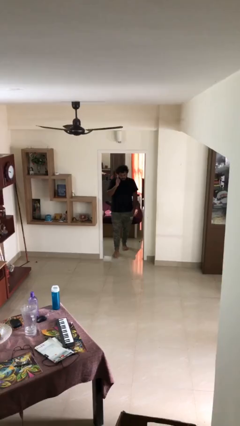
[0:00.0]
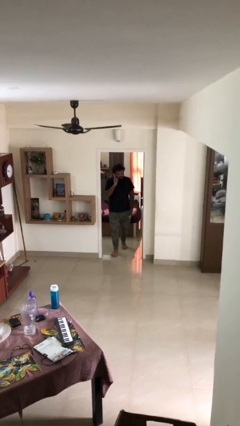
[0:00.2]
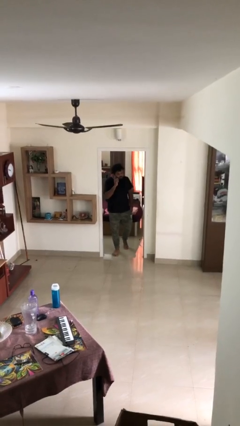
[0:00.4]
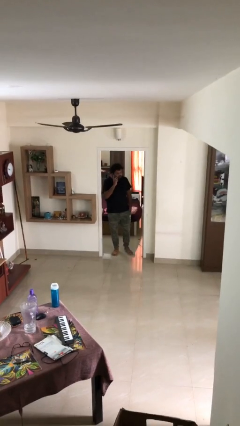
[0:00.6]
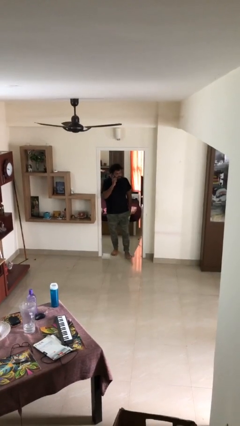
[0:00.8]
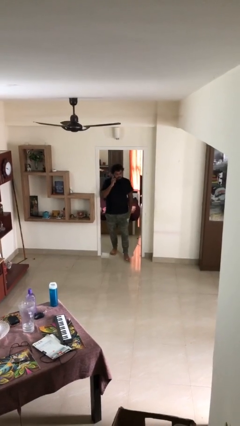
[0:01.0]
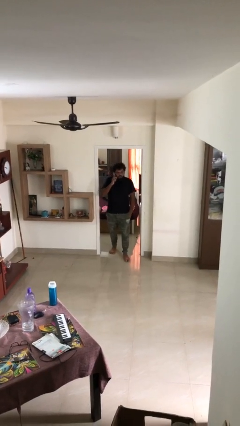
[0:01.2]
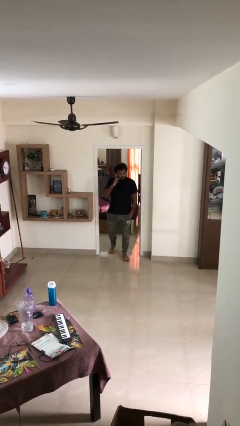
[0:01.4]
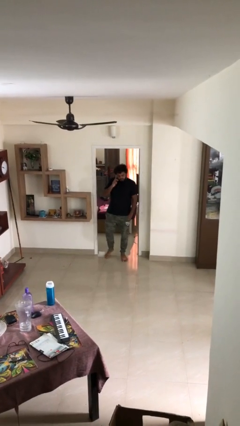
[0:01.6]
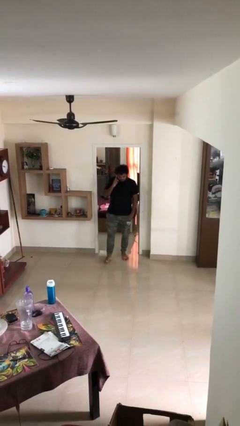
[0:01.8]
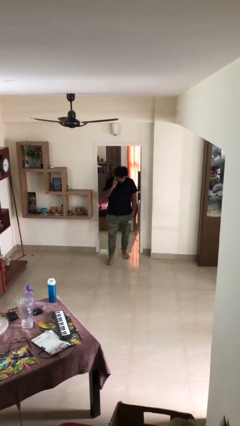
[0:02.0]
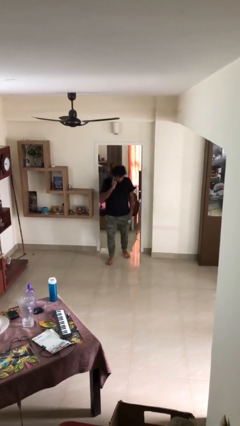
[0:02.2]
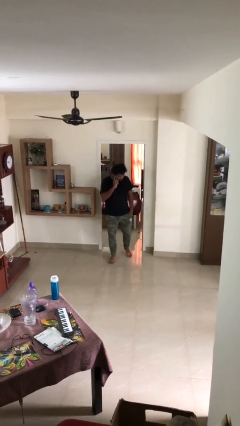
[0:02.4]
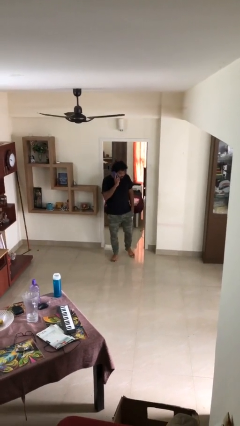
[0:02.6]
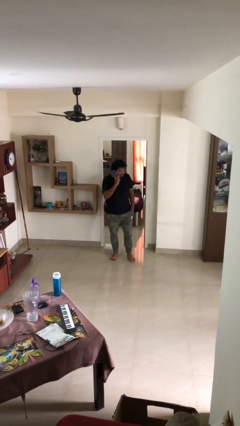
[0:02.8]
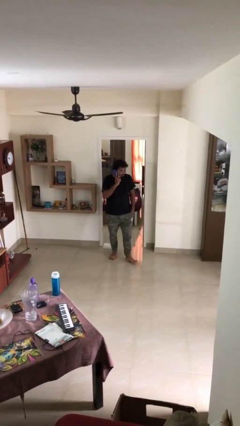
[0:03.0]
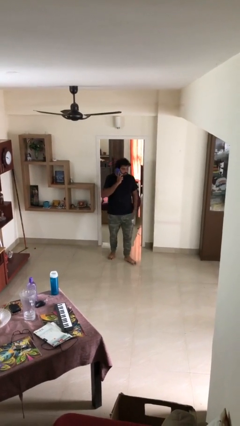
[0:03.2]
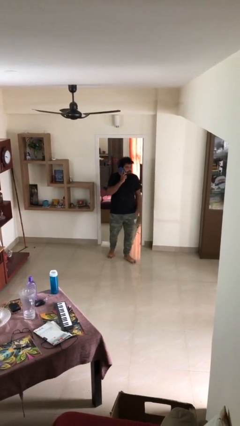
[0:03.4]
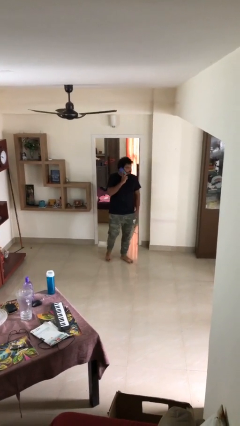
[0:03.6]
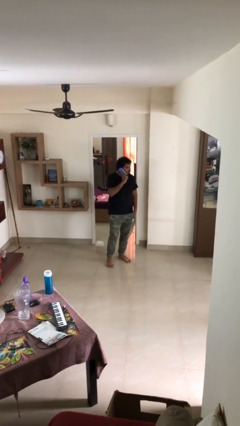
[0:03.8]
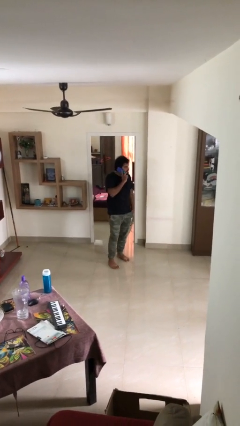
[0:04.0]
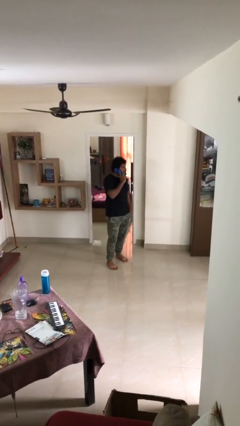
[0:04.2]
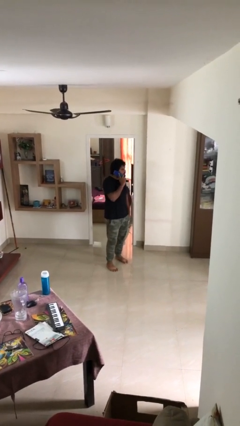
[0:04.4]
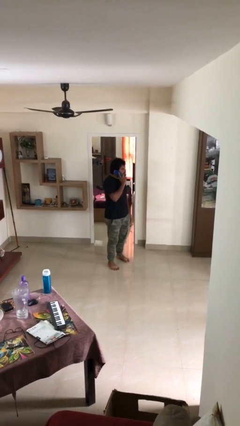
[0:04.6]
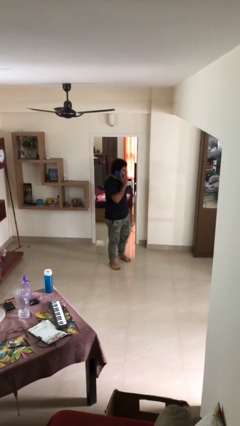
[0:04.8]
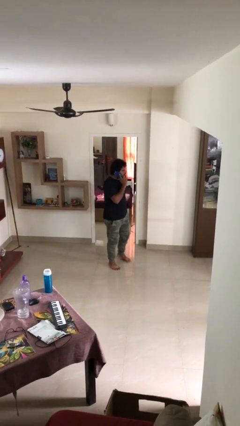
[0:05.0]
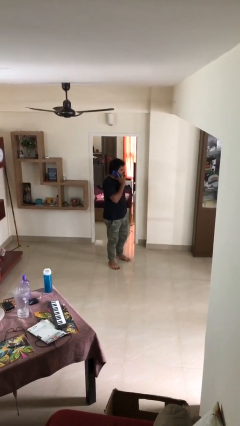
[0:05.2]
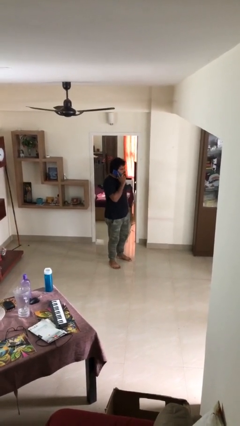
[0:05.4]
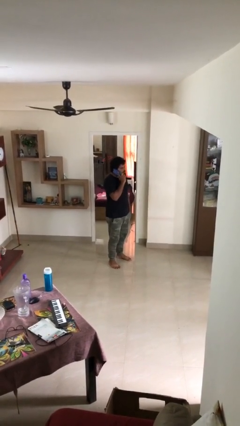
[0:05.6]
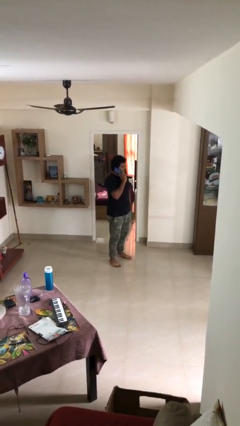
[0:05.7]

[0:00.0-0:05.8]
person enters scene through structure

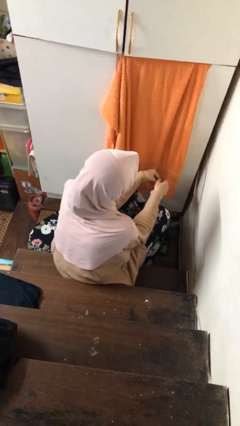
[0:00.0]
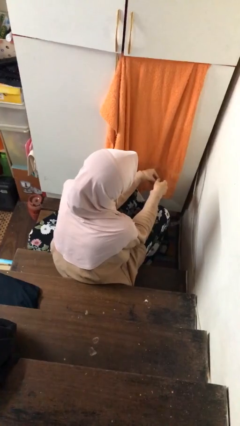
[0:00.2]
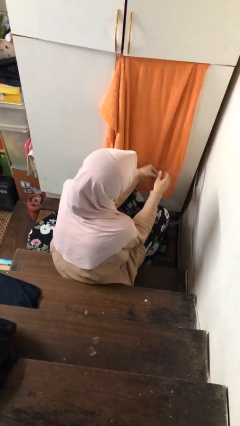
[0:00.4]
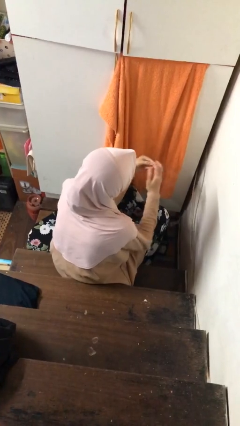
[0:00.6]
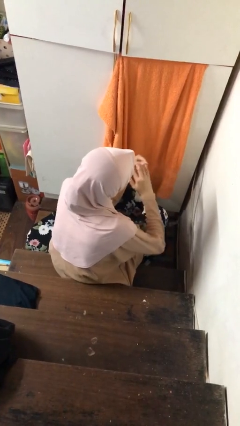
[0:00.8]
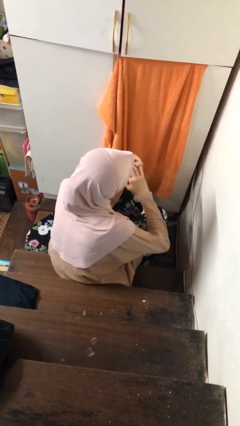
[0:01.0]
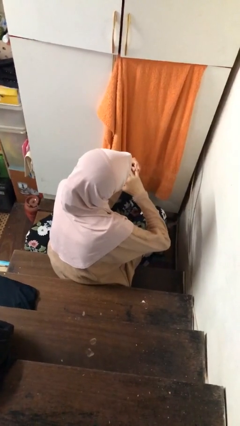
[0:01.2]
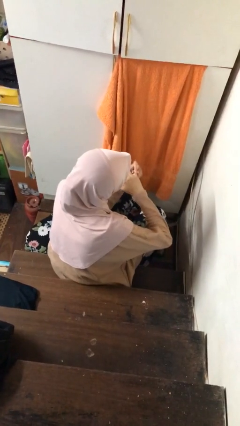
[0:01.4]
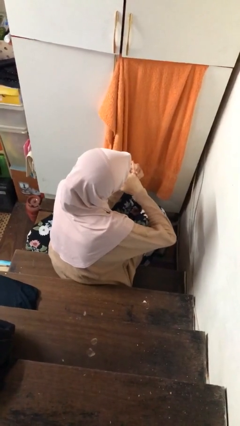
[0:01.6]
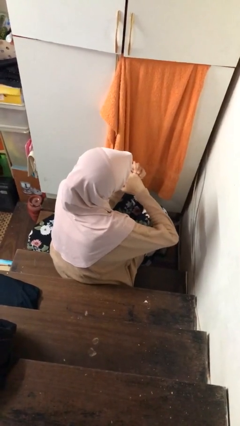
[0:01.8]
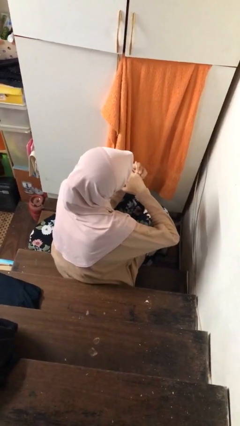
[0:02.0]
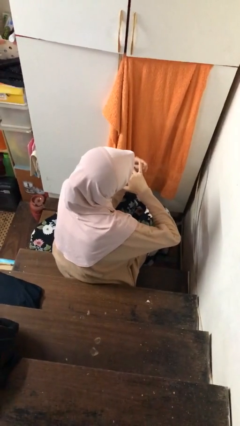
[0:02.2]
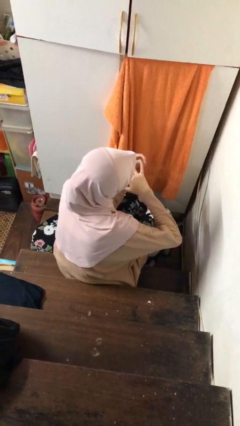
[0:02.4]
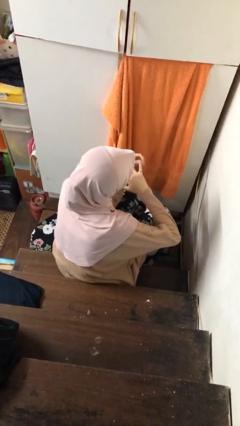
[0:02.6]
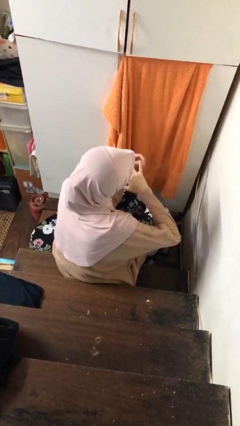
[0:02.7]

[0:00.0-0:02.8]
person puts on ring

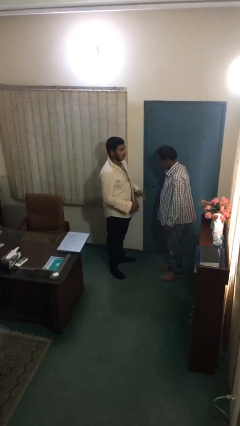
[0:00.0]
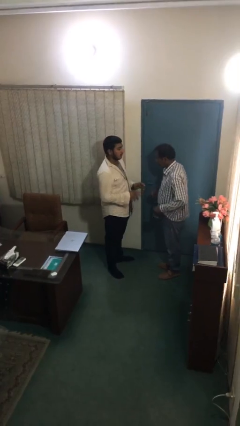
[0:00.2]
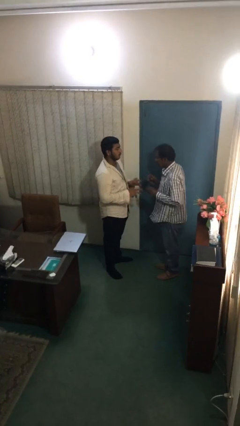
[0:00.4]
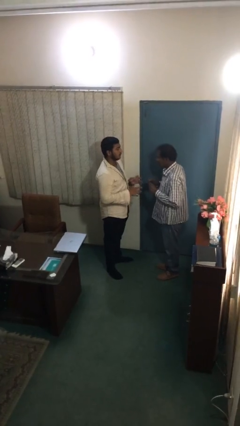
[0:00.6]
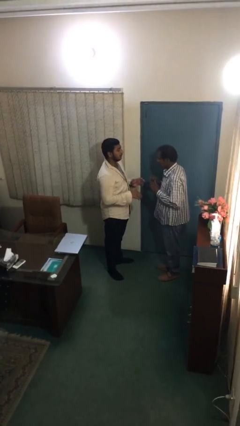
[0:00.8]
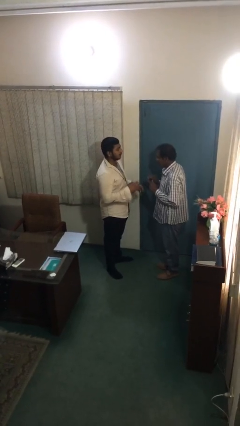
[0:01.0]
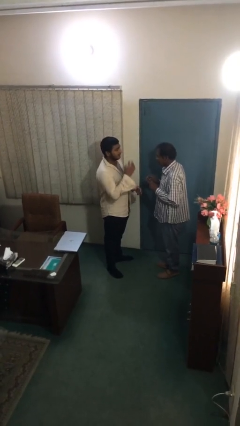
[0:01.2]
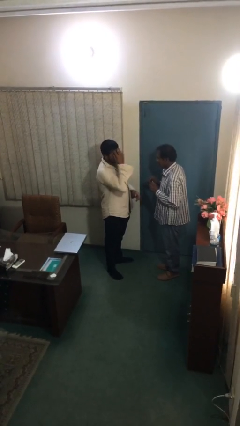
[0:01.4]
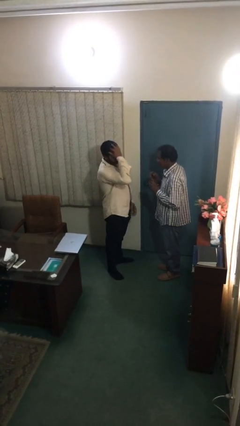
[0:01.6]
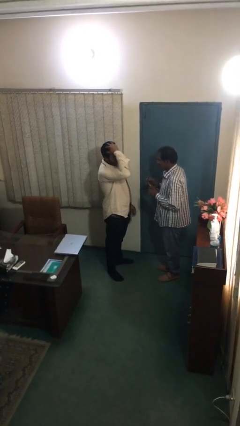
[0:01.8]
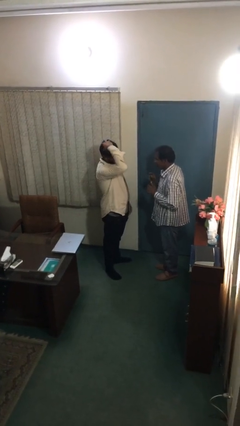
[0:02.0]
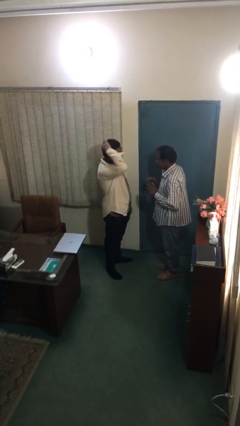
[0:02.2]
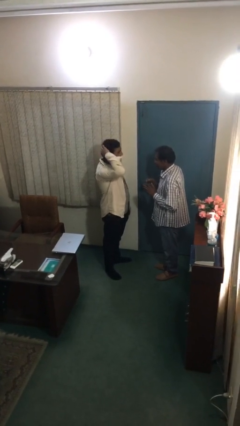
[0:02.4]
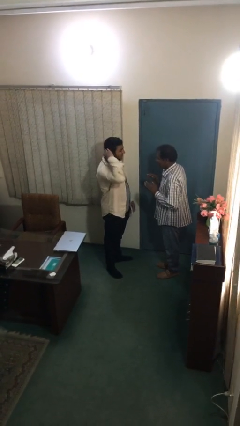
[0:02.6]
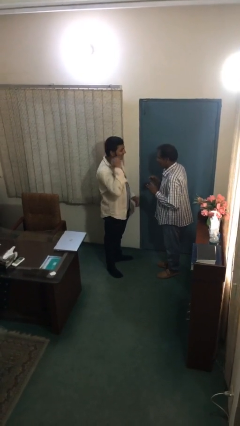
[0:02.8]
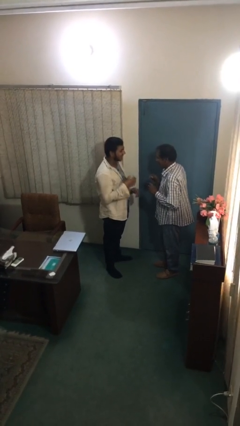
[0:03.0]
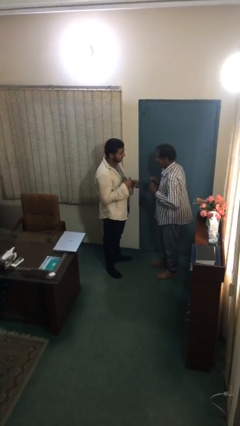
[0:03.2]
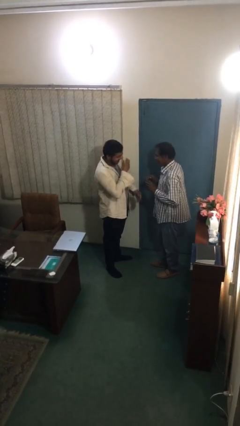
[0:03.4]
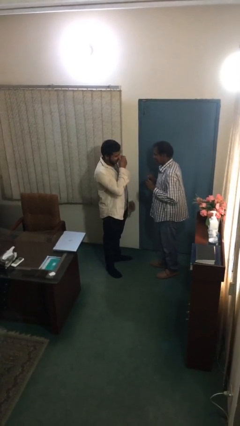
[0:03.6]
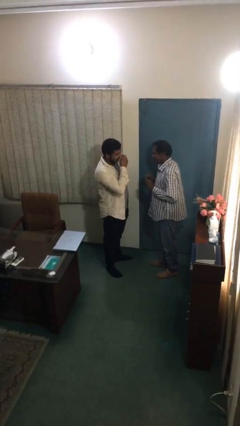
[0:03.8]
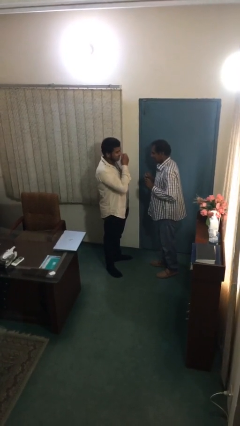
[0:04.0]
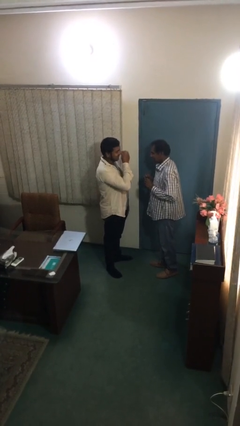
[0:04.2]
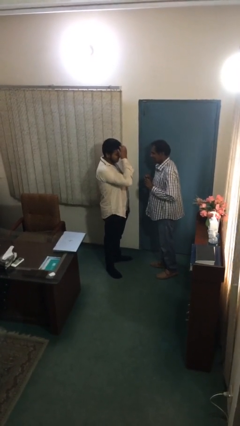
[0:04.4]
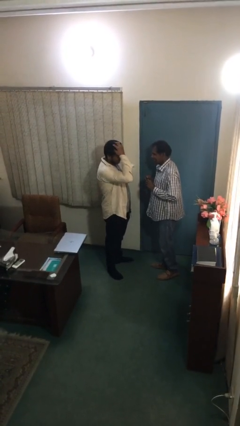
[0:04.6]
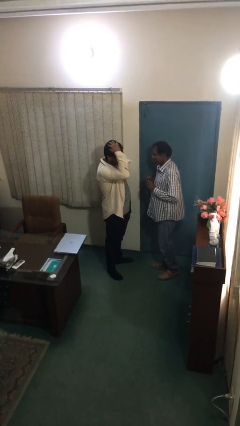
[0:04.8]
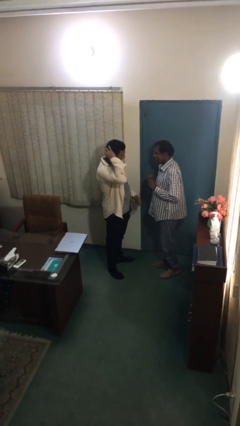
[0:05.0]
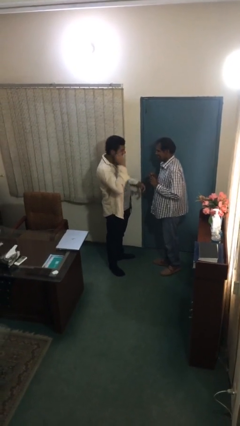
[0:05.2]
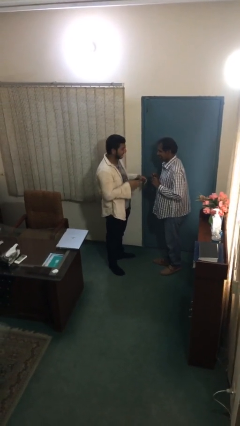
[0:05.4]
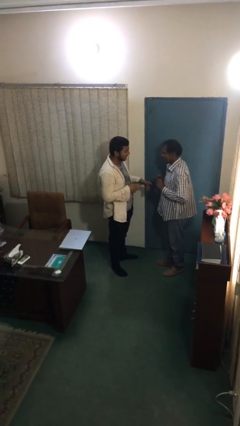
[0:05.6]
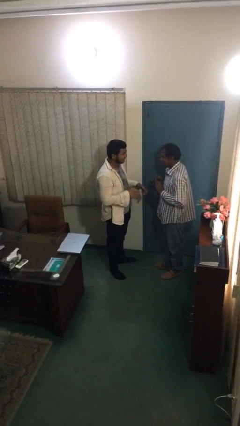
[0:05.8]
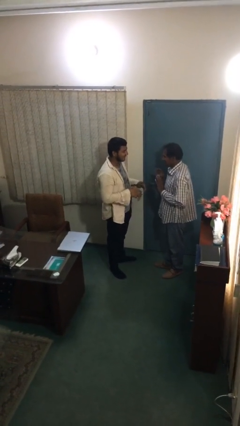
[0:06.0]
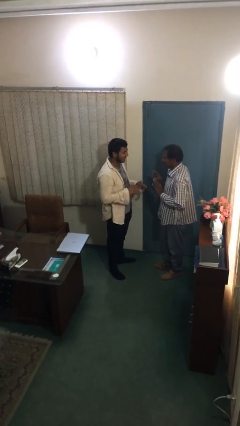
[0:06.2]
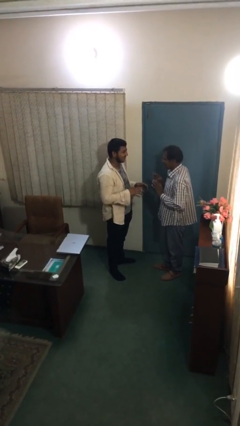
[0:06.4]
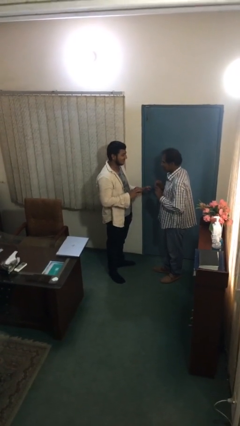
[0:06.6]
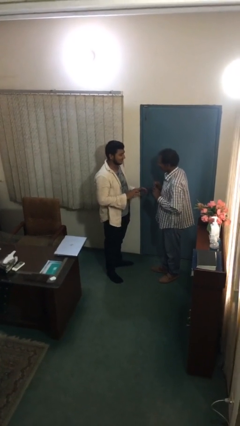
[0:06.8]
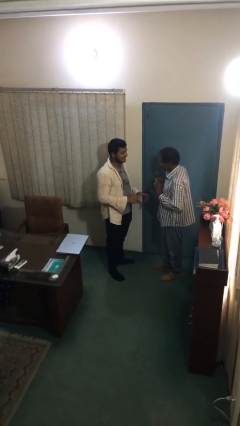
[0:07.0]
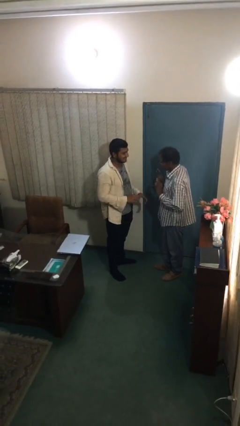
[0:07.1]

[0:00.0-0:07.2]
person talks to person

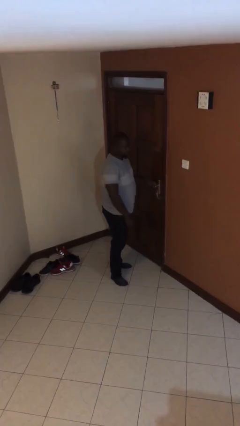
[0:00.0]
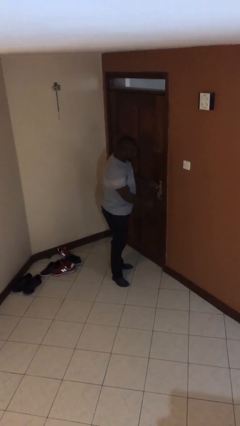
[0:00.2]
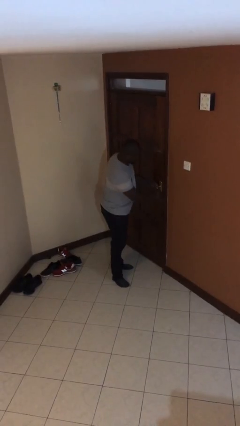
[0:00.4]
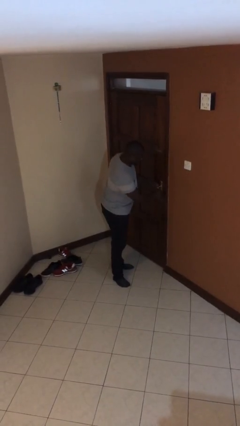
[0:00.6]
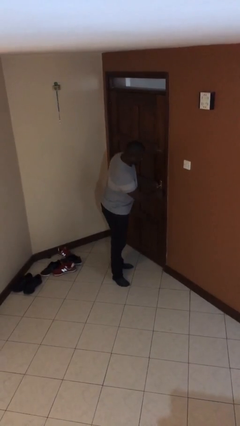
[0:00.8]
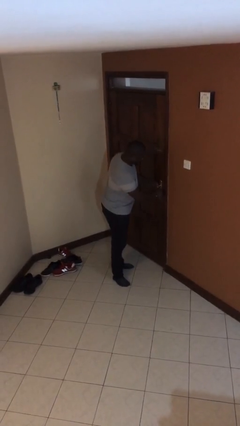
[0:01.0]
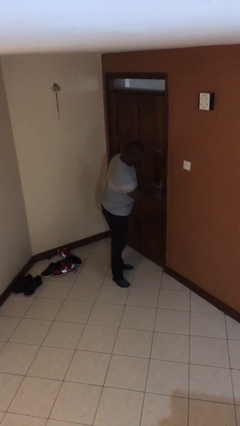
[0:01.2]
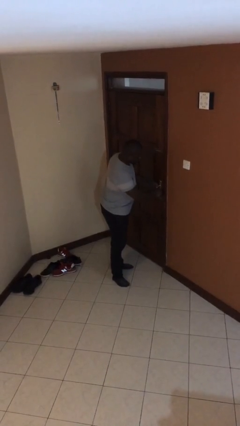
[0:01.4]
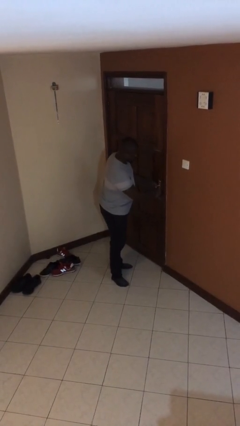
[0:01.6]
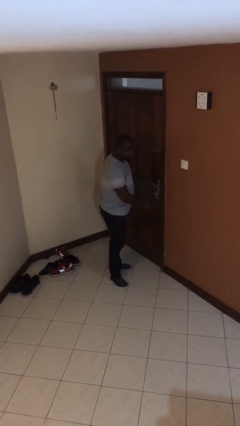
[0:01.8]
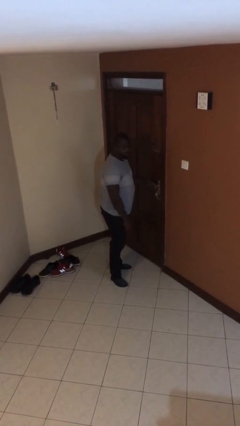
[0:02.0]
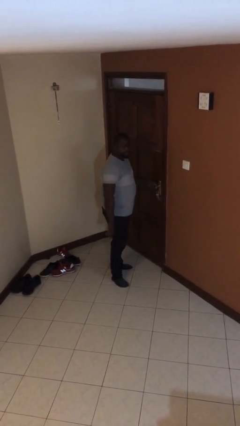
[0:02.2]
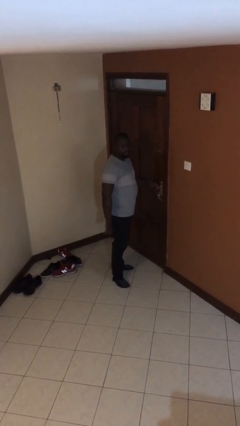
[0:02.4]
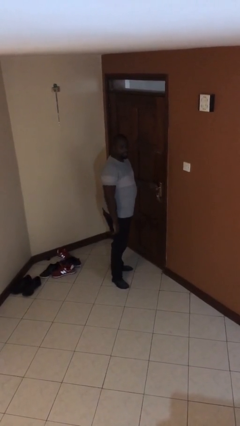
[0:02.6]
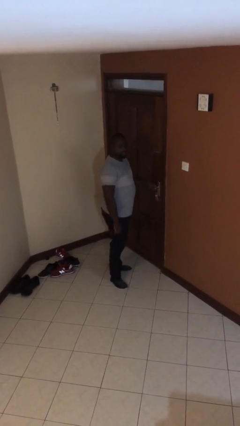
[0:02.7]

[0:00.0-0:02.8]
person unlocks door with keys
